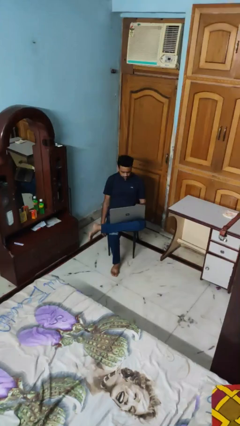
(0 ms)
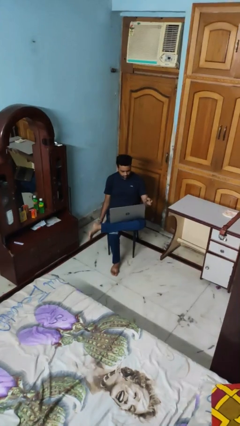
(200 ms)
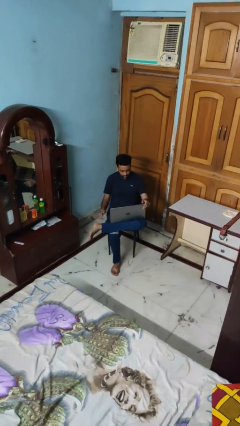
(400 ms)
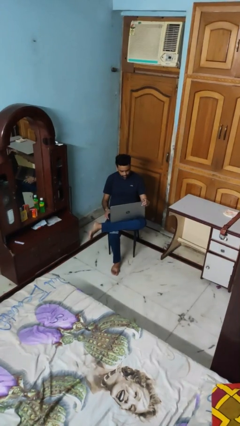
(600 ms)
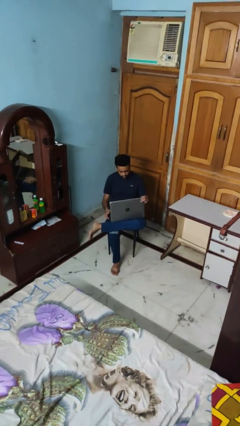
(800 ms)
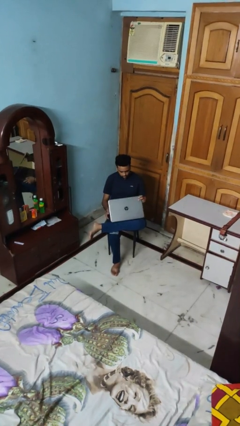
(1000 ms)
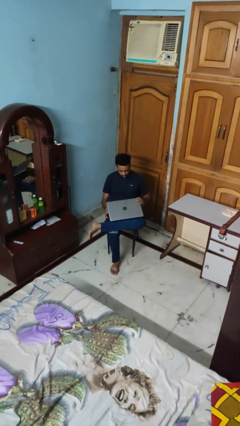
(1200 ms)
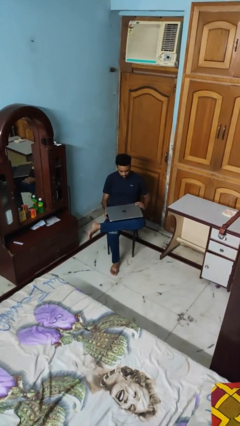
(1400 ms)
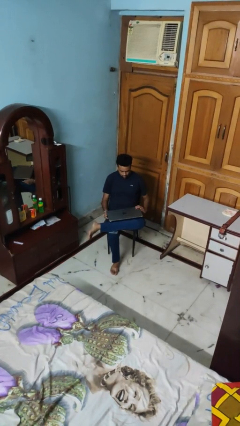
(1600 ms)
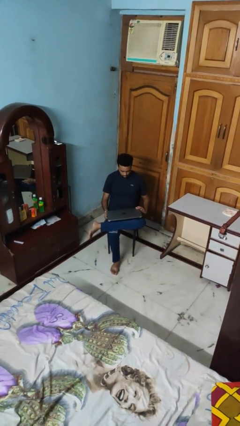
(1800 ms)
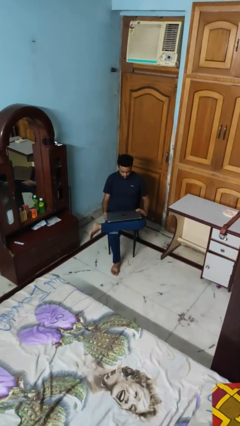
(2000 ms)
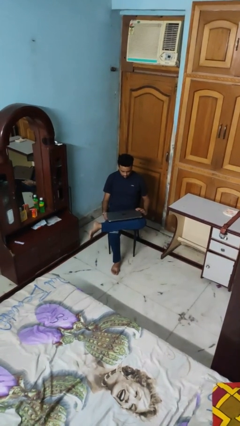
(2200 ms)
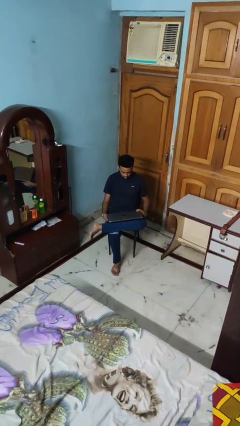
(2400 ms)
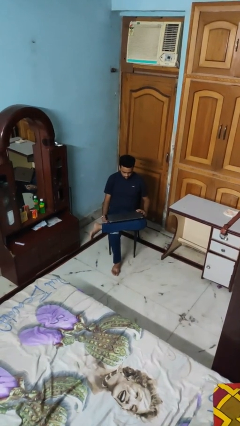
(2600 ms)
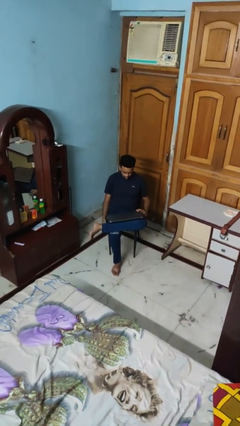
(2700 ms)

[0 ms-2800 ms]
person closes laptop

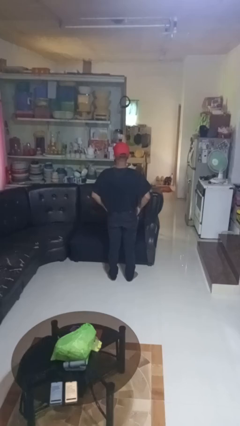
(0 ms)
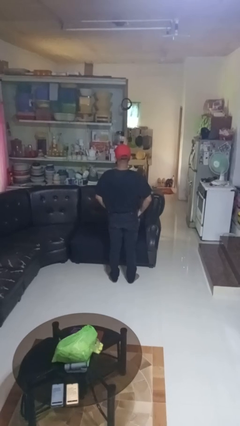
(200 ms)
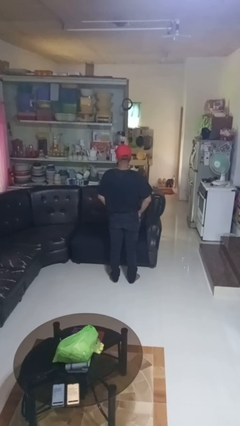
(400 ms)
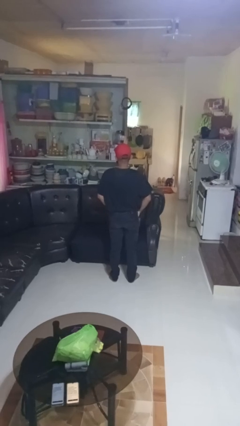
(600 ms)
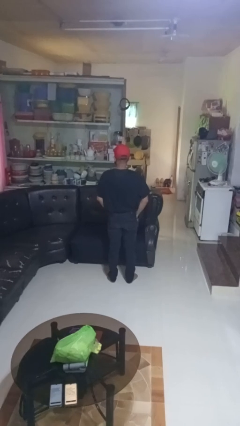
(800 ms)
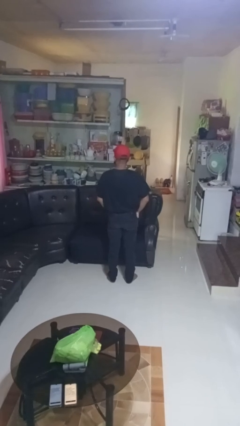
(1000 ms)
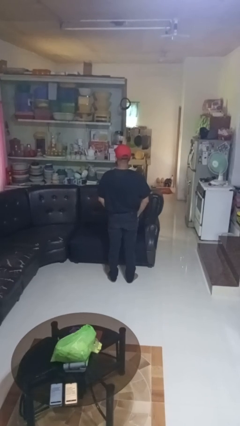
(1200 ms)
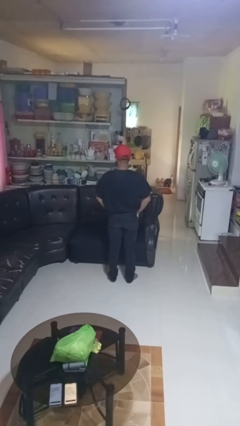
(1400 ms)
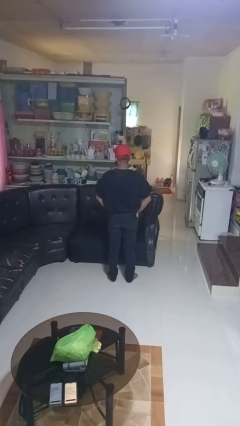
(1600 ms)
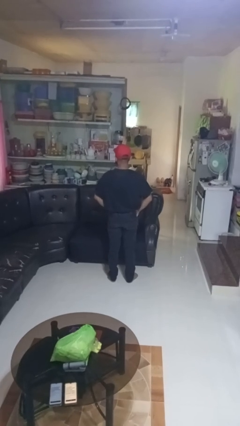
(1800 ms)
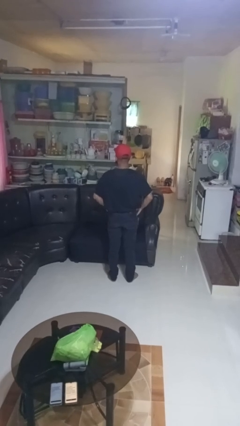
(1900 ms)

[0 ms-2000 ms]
person puts hands in back pockets

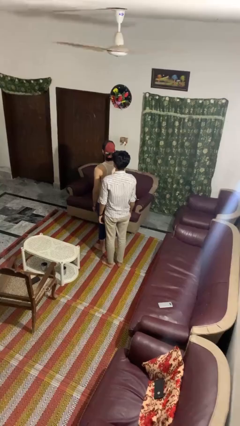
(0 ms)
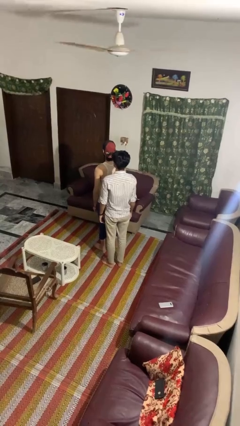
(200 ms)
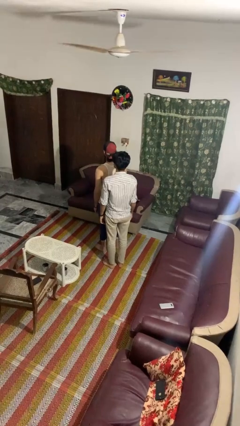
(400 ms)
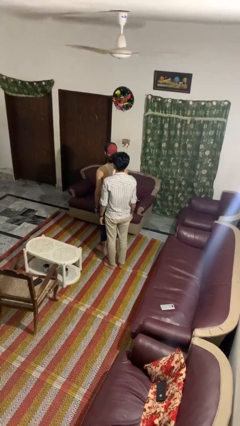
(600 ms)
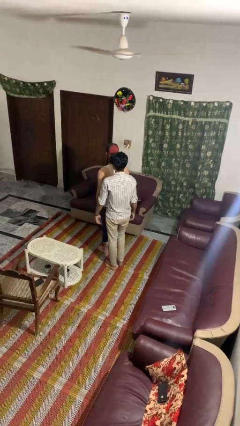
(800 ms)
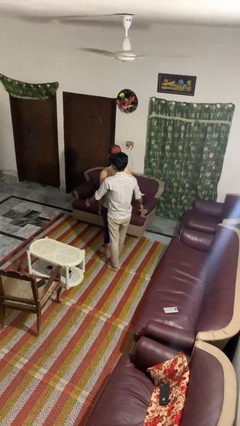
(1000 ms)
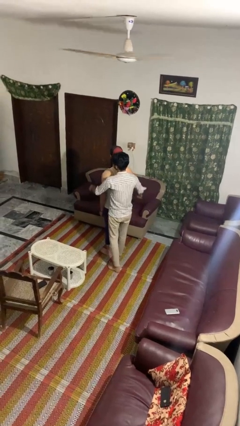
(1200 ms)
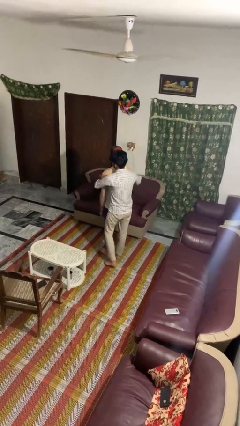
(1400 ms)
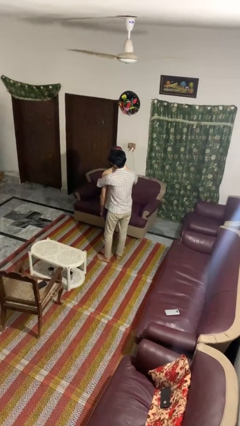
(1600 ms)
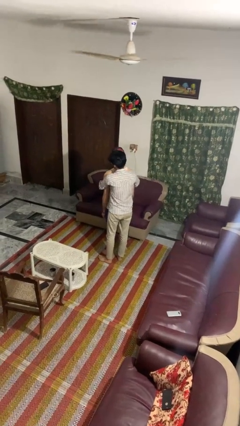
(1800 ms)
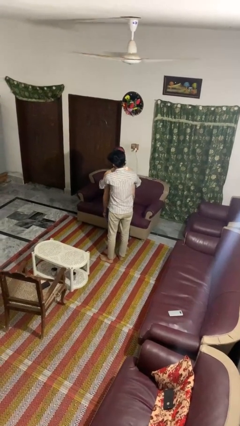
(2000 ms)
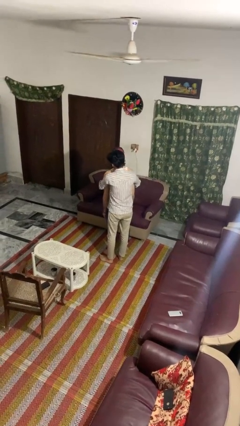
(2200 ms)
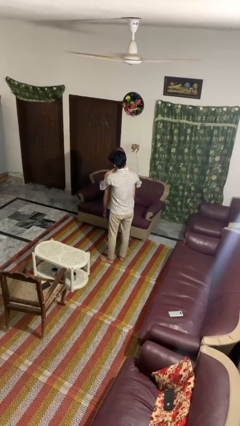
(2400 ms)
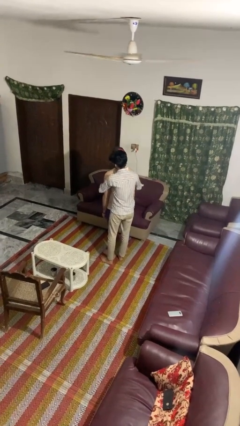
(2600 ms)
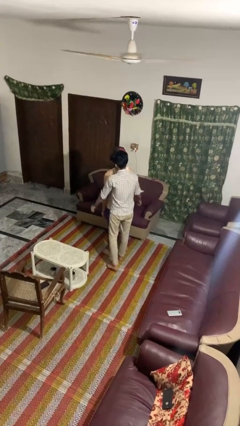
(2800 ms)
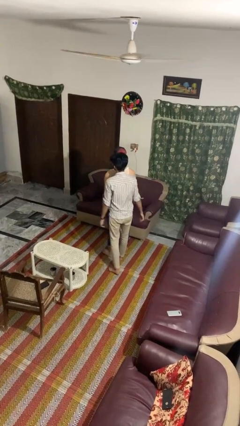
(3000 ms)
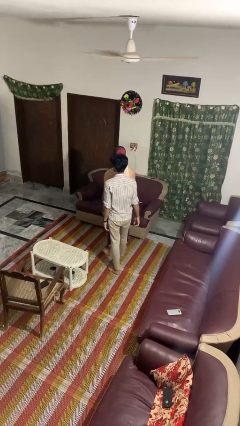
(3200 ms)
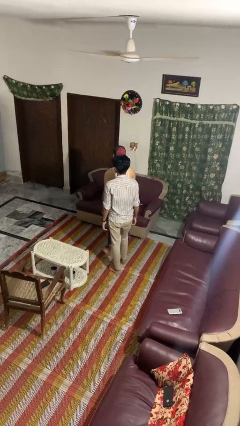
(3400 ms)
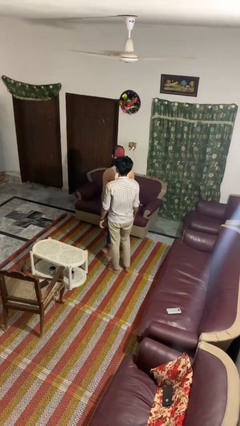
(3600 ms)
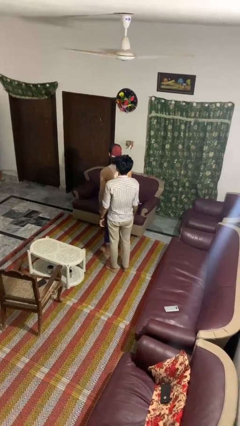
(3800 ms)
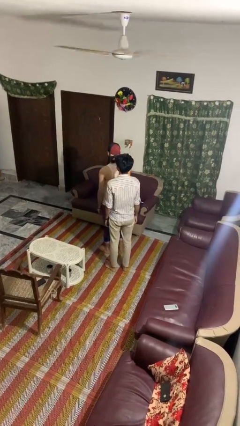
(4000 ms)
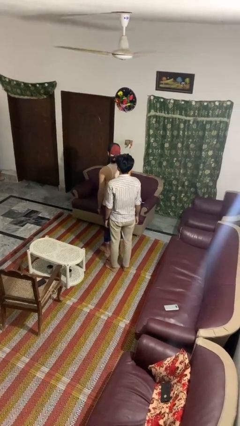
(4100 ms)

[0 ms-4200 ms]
person hugs person from behind

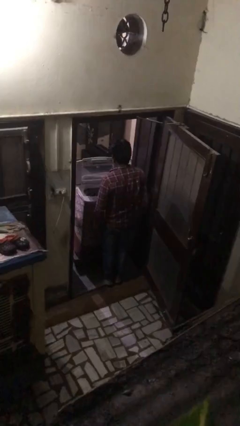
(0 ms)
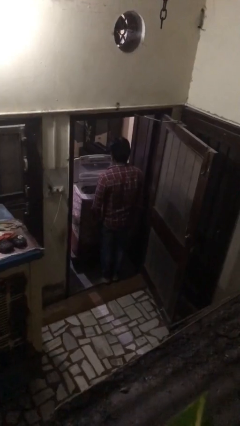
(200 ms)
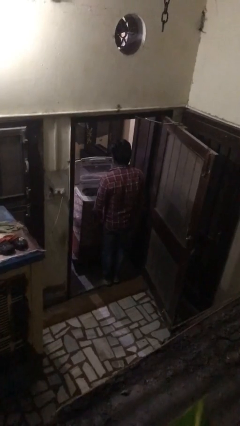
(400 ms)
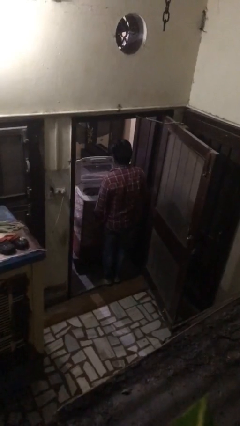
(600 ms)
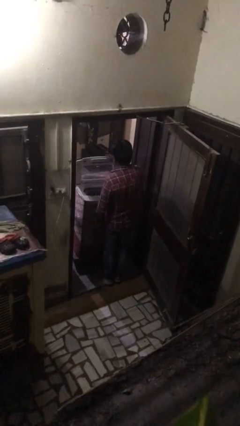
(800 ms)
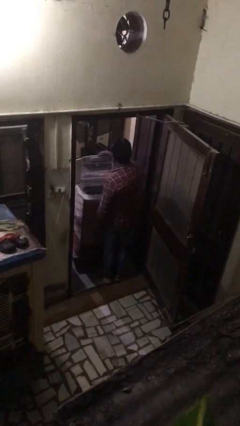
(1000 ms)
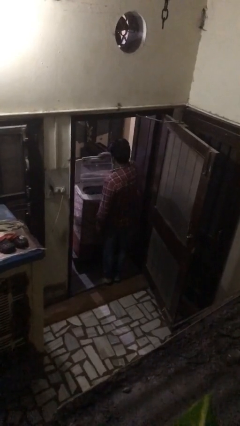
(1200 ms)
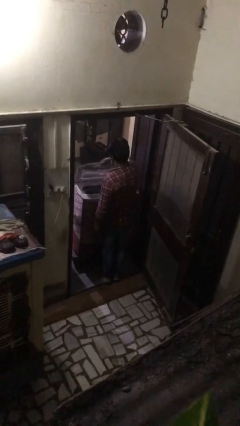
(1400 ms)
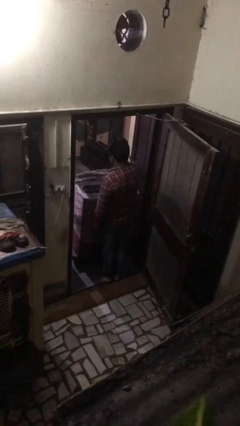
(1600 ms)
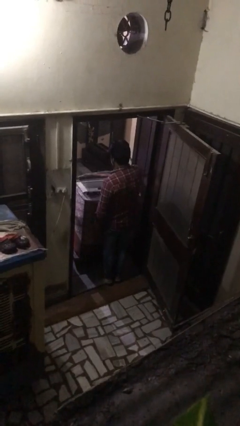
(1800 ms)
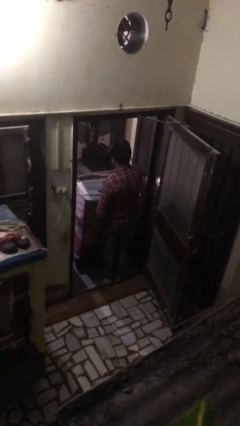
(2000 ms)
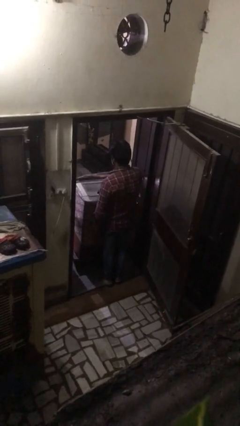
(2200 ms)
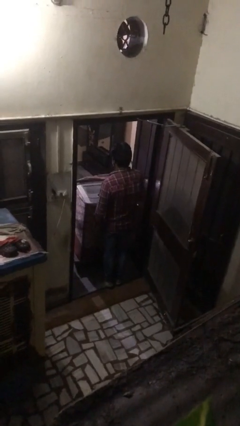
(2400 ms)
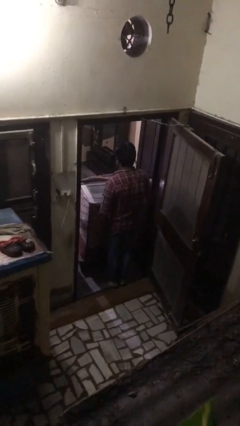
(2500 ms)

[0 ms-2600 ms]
person closes clothes washer

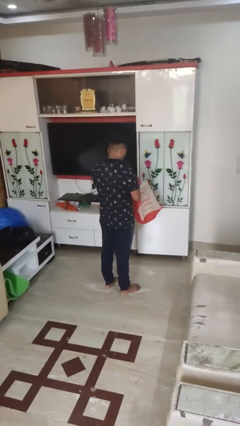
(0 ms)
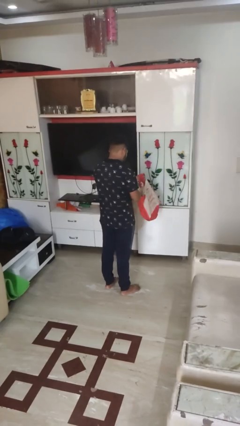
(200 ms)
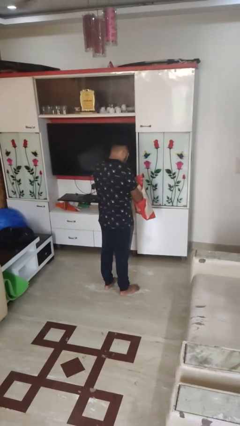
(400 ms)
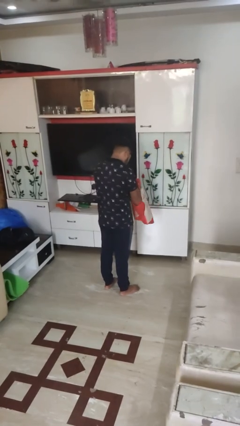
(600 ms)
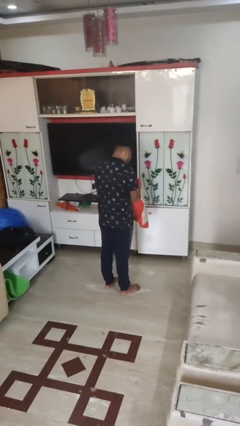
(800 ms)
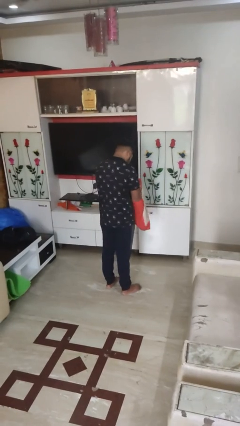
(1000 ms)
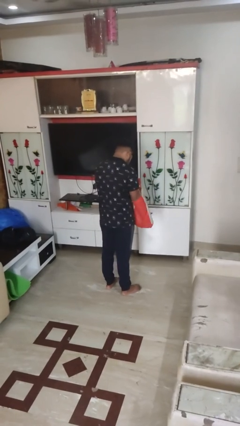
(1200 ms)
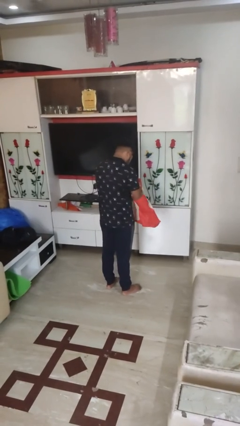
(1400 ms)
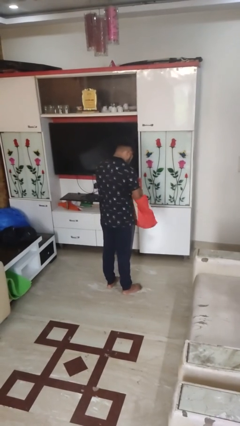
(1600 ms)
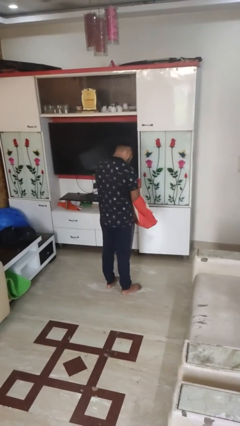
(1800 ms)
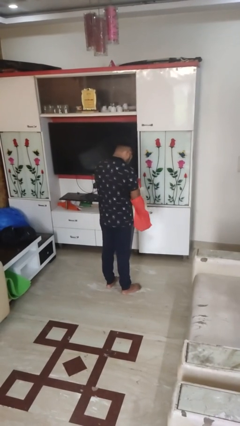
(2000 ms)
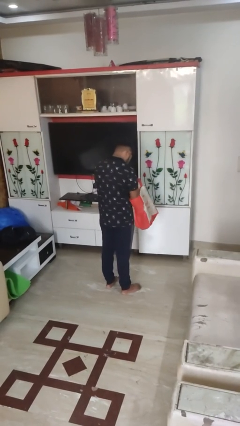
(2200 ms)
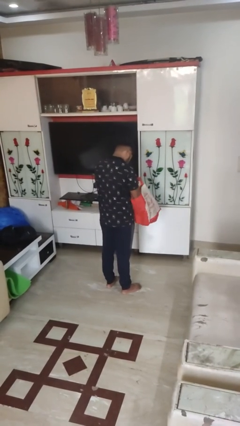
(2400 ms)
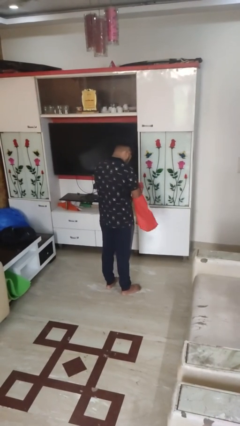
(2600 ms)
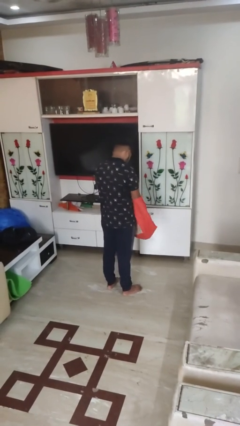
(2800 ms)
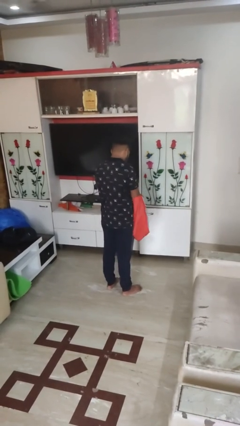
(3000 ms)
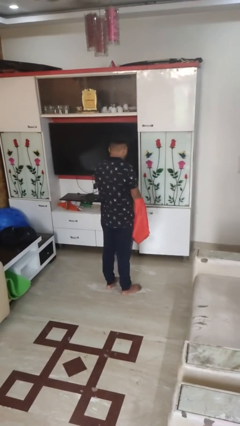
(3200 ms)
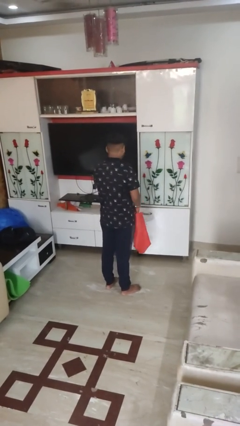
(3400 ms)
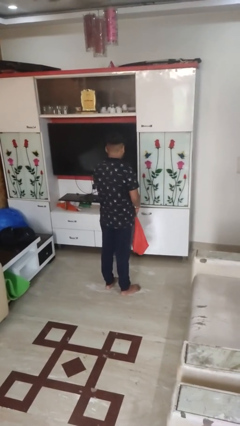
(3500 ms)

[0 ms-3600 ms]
person searches in bag

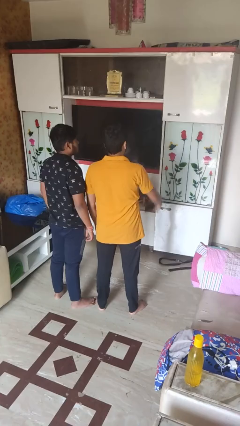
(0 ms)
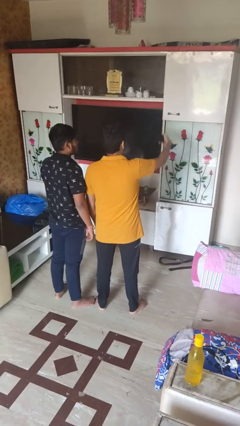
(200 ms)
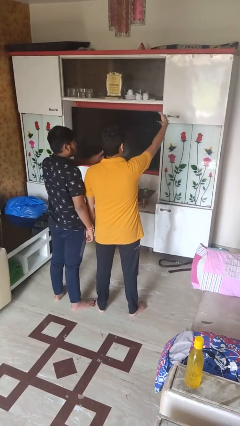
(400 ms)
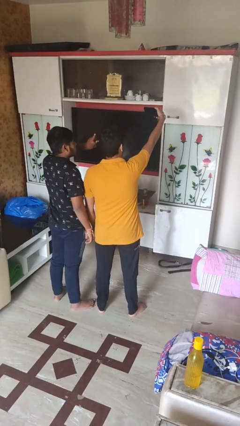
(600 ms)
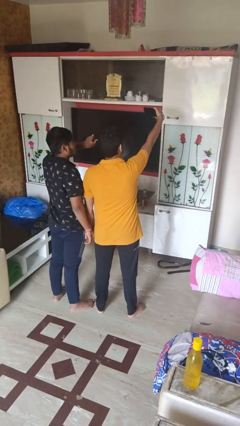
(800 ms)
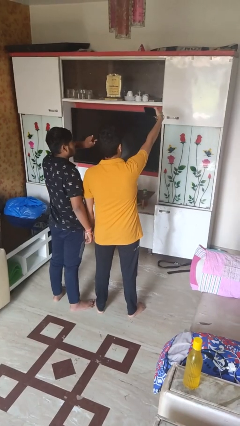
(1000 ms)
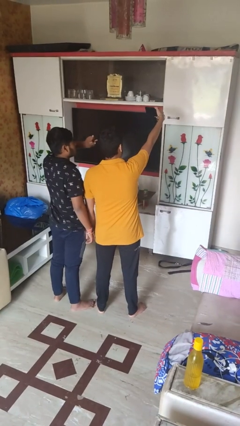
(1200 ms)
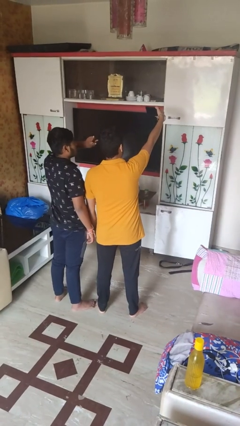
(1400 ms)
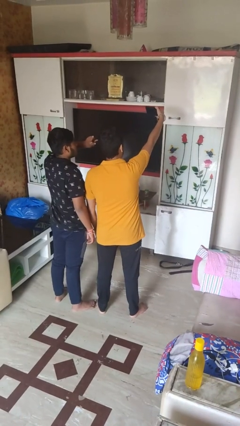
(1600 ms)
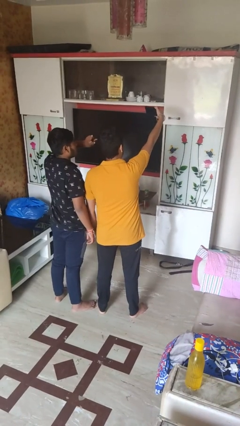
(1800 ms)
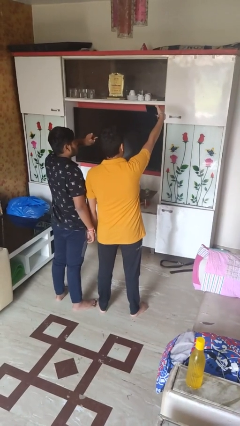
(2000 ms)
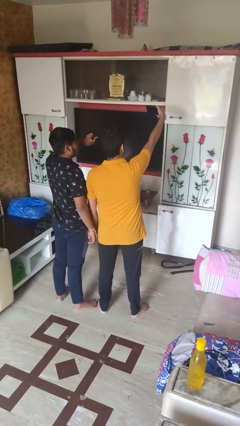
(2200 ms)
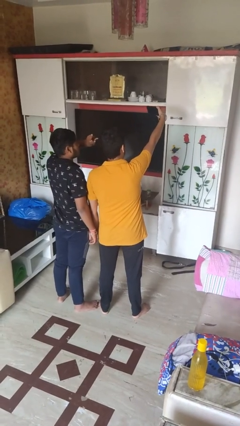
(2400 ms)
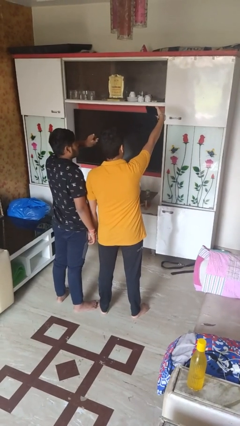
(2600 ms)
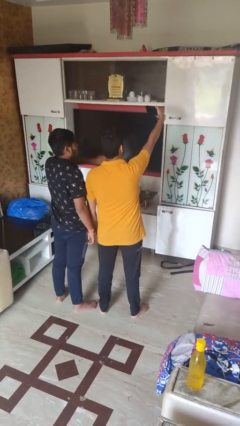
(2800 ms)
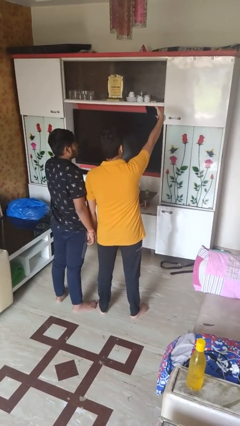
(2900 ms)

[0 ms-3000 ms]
person takes selfie with person
